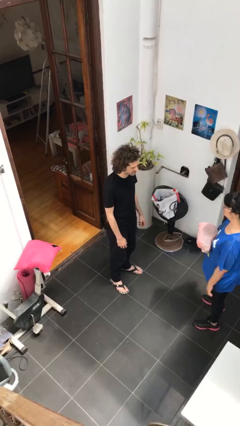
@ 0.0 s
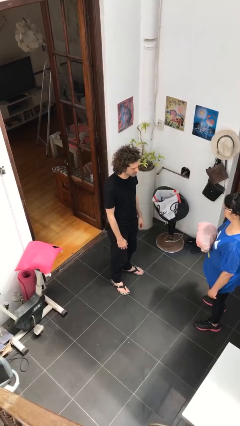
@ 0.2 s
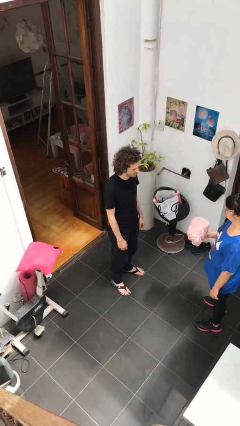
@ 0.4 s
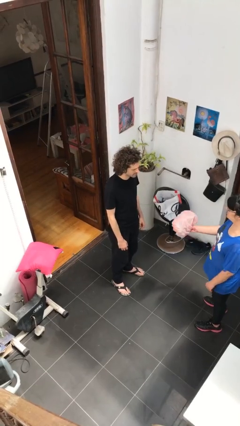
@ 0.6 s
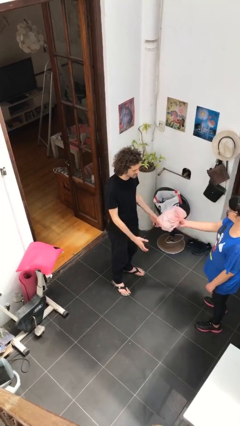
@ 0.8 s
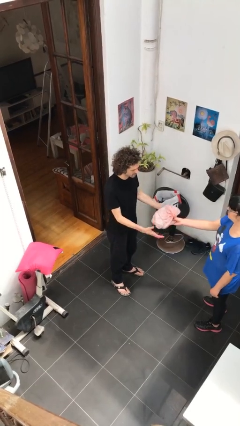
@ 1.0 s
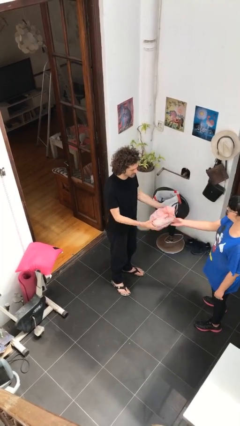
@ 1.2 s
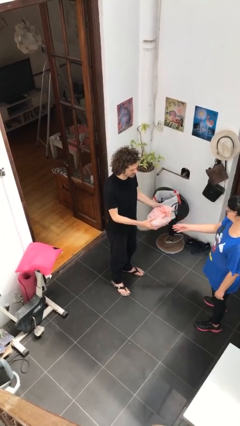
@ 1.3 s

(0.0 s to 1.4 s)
person transfers object to person

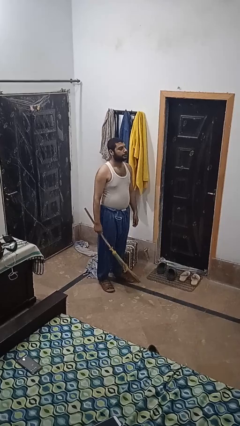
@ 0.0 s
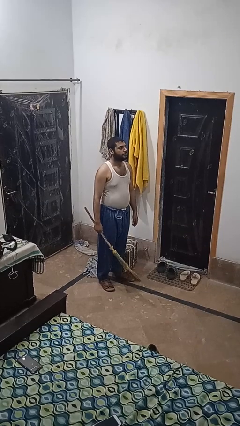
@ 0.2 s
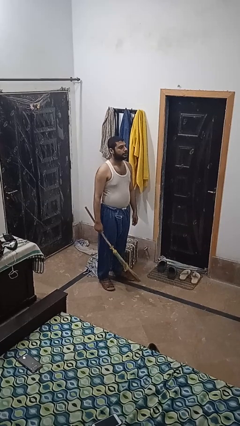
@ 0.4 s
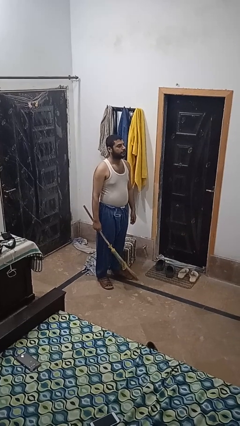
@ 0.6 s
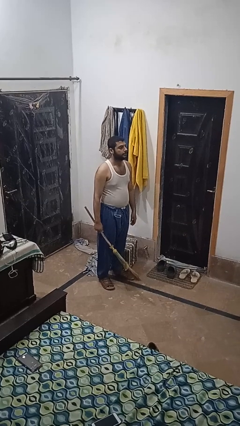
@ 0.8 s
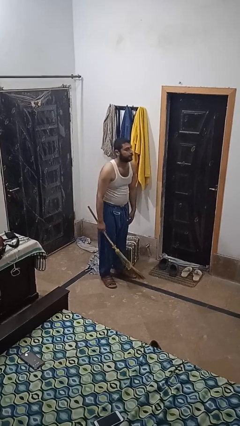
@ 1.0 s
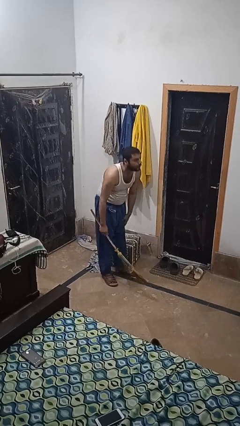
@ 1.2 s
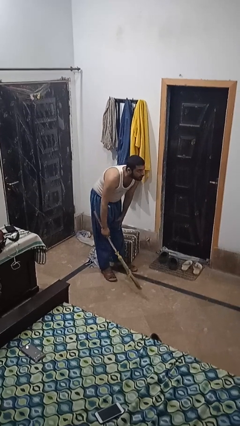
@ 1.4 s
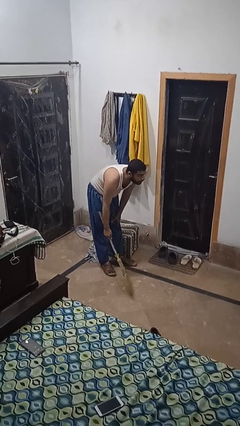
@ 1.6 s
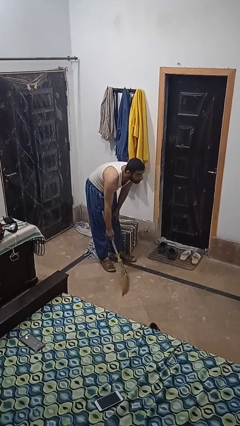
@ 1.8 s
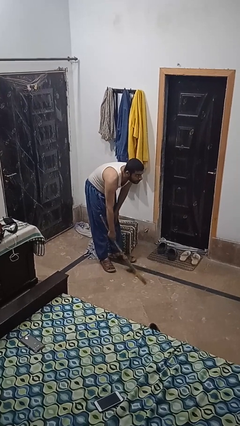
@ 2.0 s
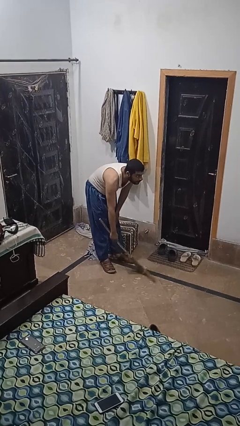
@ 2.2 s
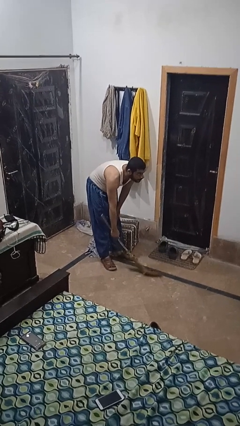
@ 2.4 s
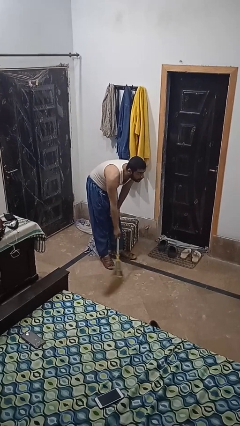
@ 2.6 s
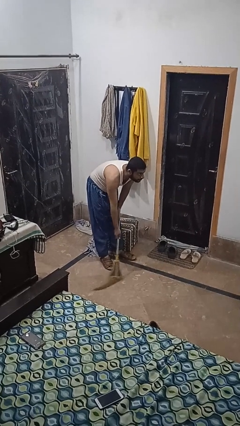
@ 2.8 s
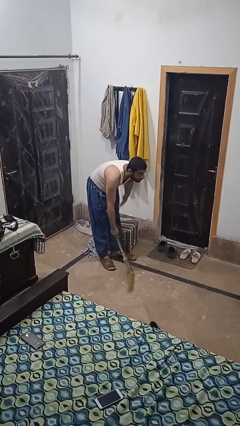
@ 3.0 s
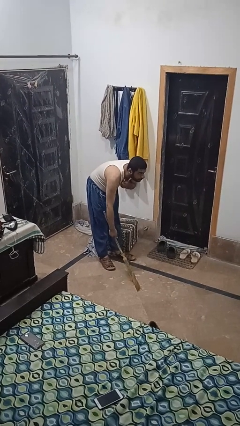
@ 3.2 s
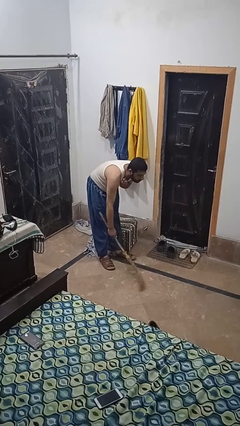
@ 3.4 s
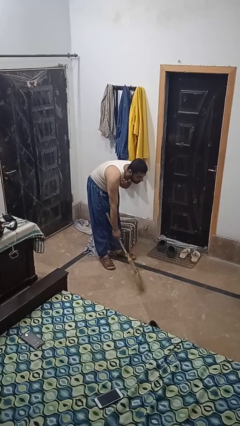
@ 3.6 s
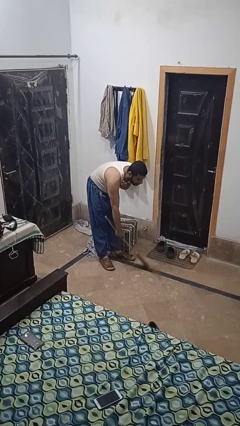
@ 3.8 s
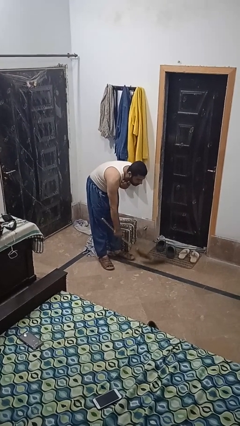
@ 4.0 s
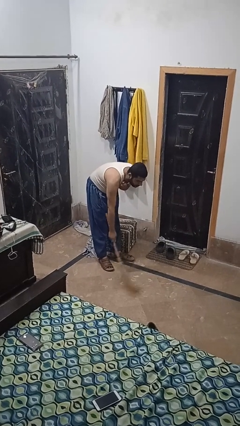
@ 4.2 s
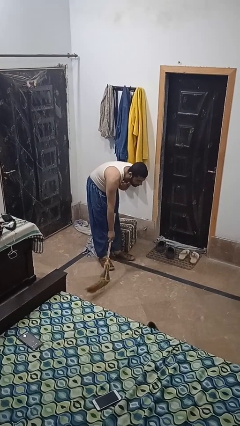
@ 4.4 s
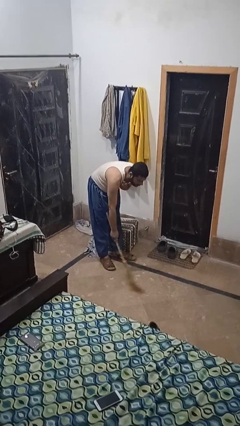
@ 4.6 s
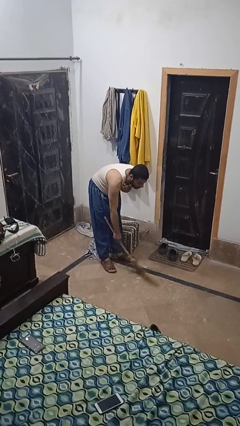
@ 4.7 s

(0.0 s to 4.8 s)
person sweeps floor

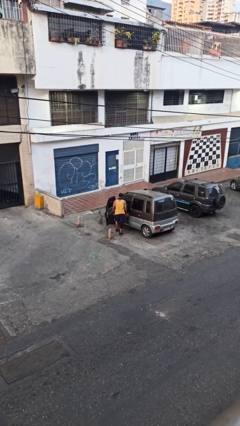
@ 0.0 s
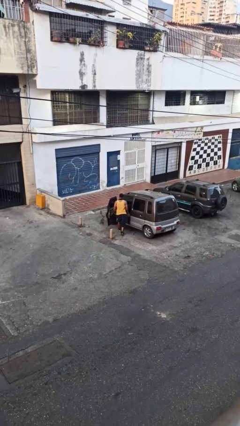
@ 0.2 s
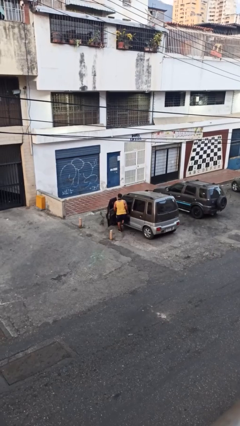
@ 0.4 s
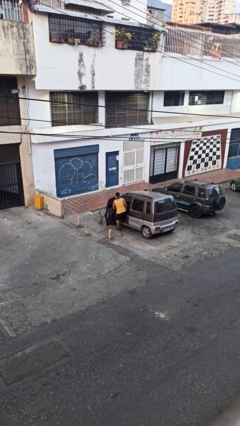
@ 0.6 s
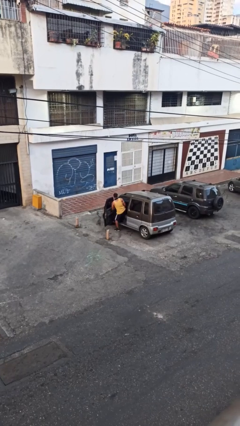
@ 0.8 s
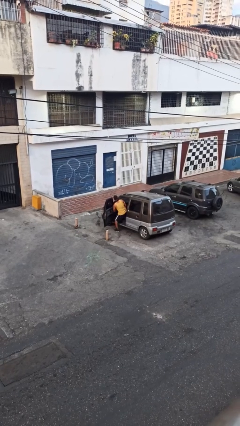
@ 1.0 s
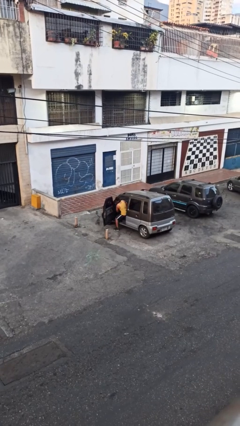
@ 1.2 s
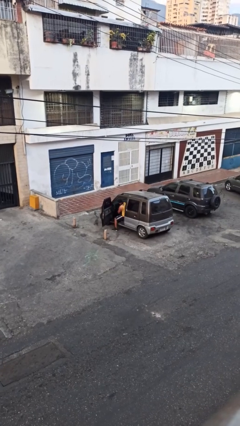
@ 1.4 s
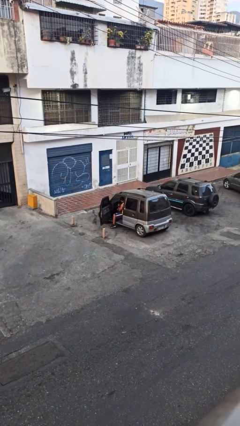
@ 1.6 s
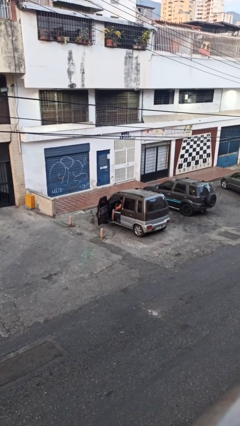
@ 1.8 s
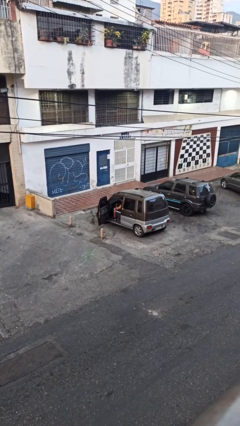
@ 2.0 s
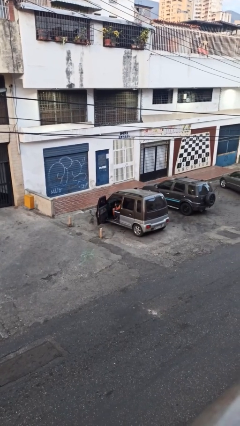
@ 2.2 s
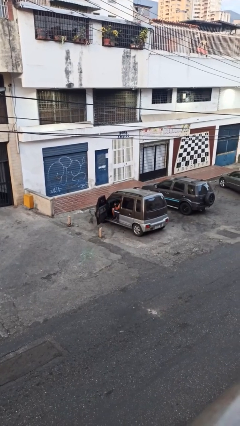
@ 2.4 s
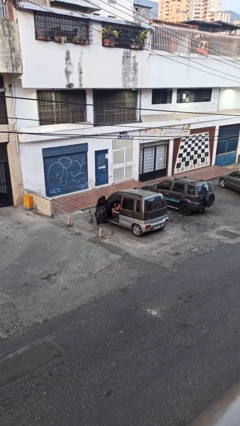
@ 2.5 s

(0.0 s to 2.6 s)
person enters car

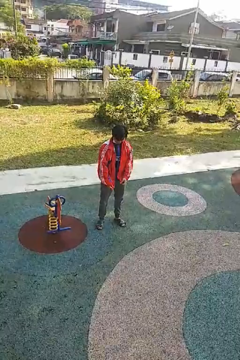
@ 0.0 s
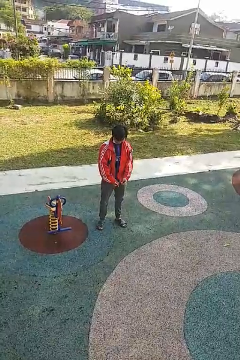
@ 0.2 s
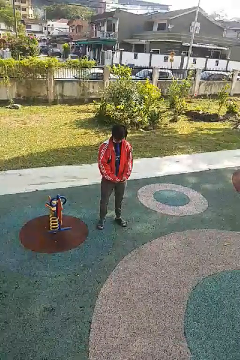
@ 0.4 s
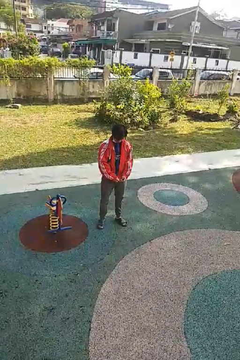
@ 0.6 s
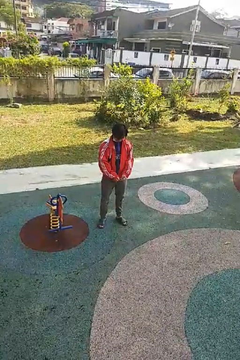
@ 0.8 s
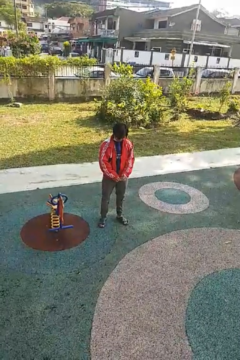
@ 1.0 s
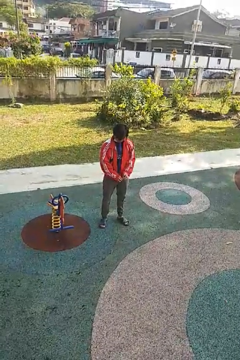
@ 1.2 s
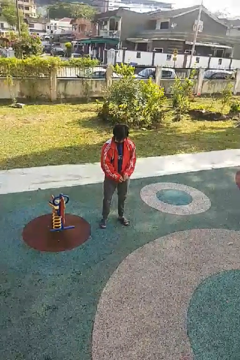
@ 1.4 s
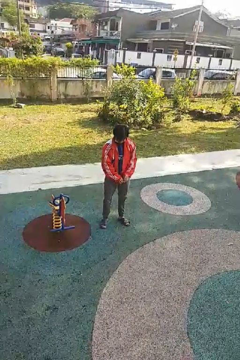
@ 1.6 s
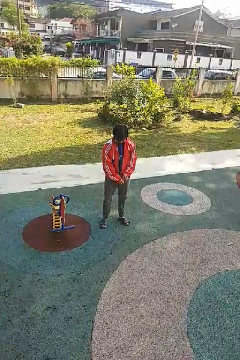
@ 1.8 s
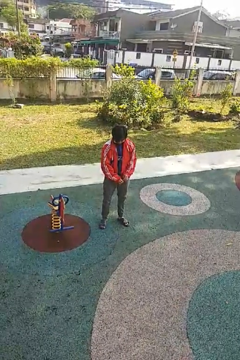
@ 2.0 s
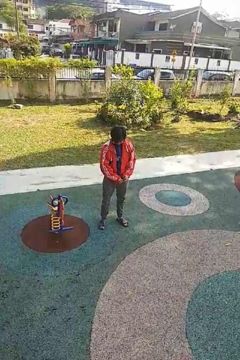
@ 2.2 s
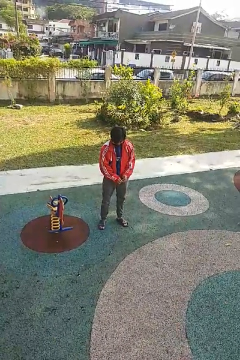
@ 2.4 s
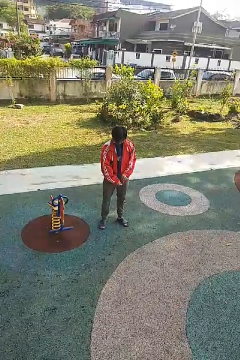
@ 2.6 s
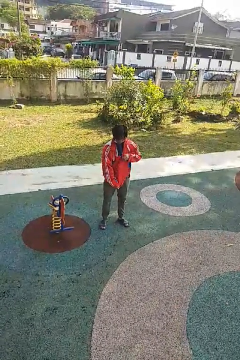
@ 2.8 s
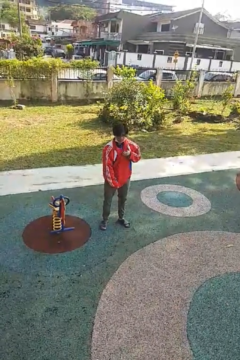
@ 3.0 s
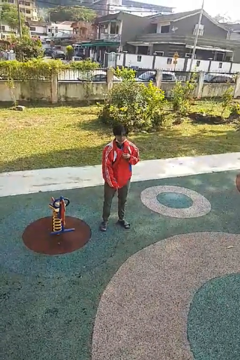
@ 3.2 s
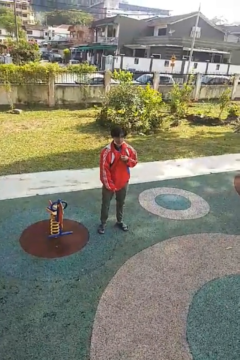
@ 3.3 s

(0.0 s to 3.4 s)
person zips up jacket

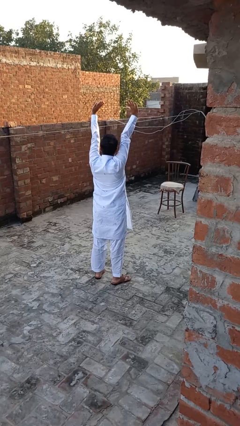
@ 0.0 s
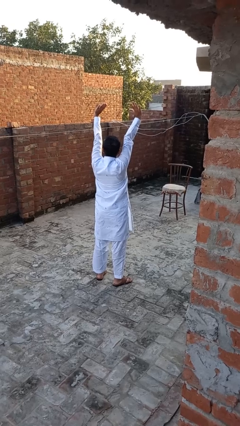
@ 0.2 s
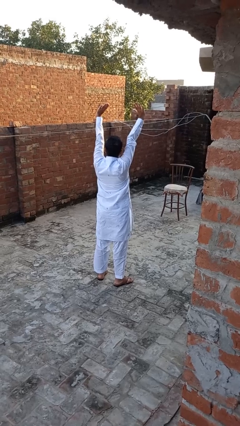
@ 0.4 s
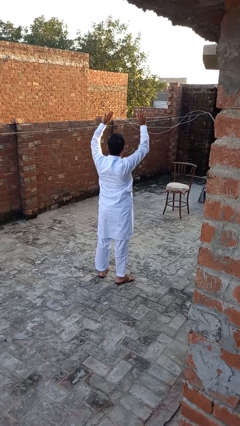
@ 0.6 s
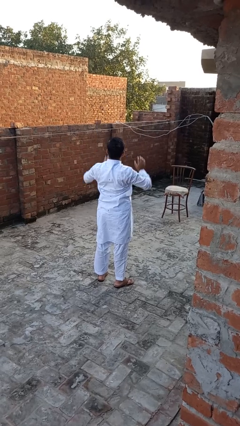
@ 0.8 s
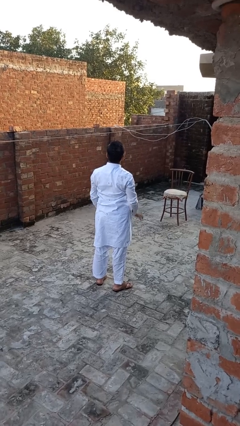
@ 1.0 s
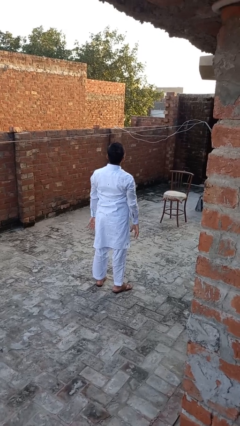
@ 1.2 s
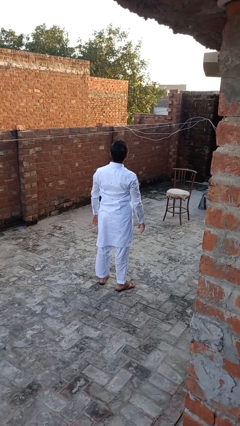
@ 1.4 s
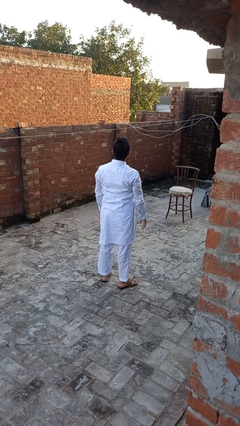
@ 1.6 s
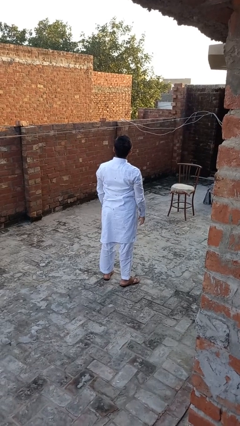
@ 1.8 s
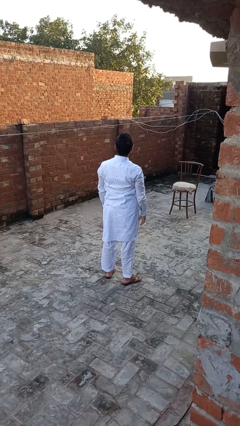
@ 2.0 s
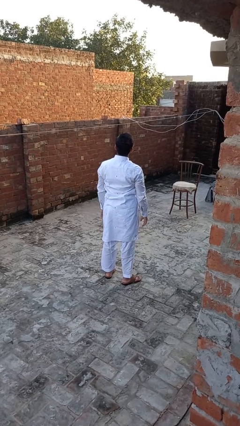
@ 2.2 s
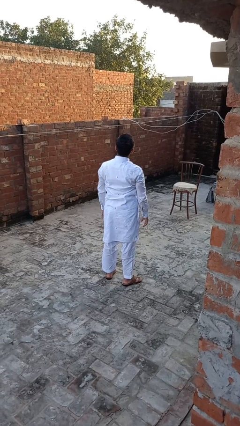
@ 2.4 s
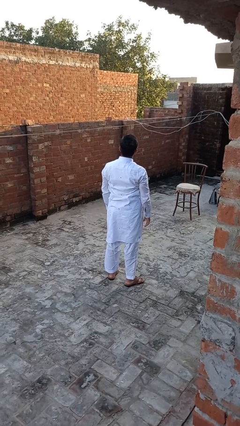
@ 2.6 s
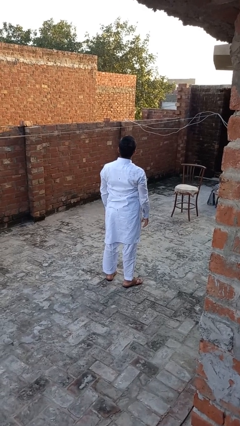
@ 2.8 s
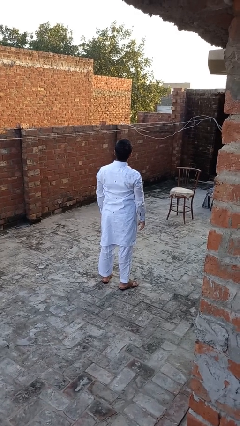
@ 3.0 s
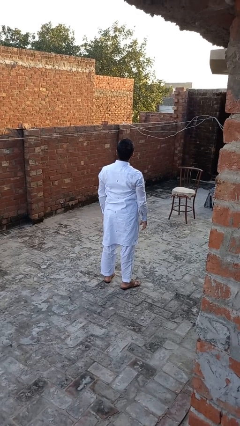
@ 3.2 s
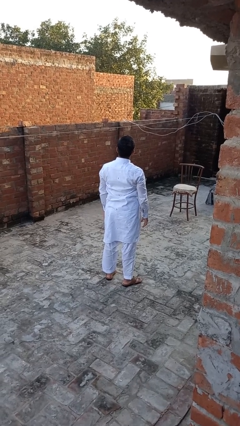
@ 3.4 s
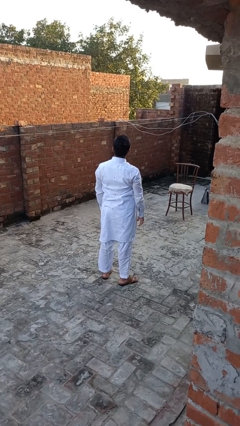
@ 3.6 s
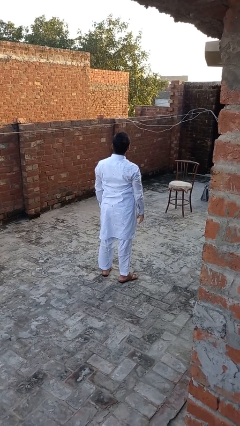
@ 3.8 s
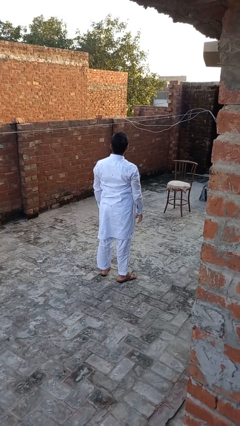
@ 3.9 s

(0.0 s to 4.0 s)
person gestures swipe down

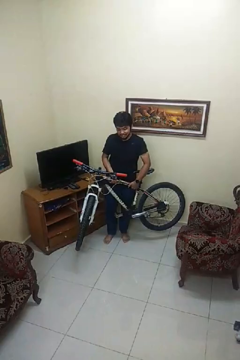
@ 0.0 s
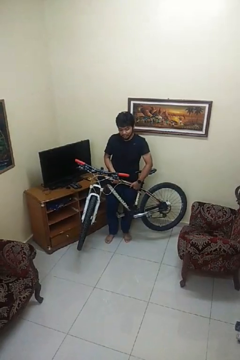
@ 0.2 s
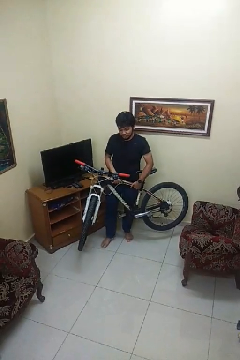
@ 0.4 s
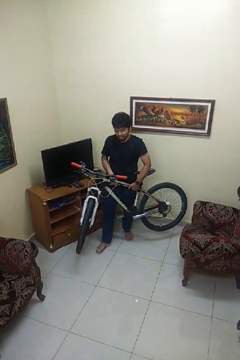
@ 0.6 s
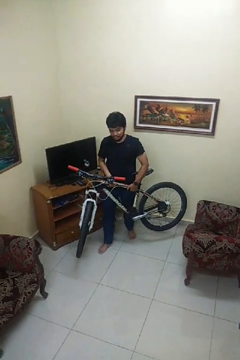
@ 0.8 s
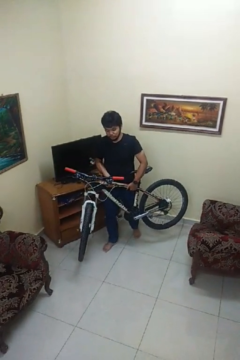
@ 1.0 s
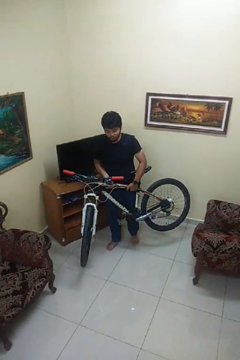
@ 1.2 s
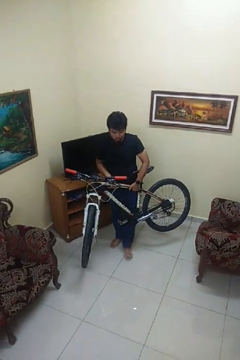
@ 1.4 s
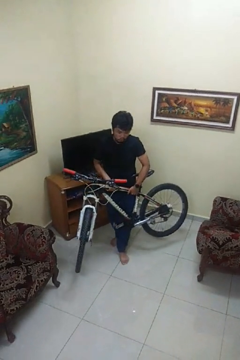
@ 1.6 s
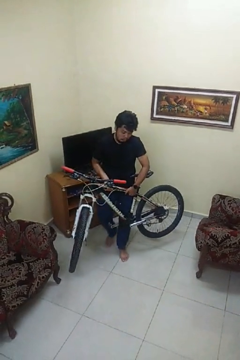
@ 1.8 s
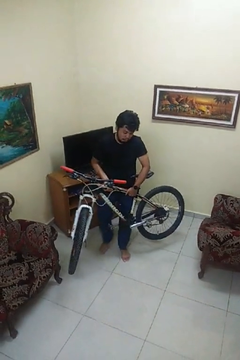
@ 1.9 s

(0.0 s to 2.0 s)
person carries bicycle

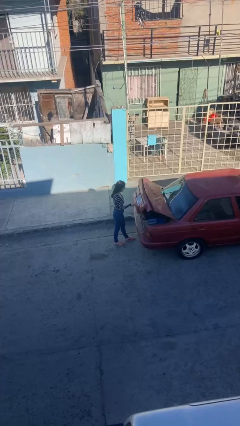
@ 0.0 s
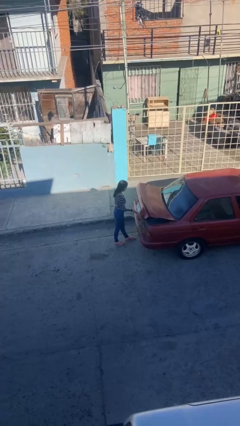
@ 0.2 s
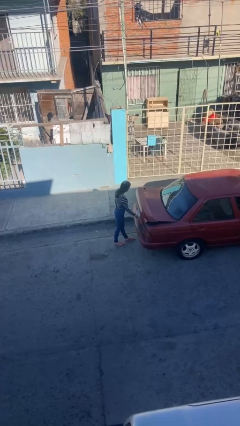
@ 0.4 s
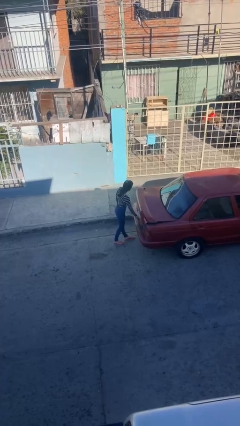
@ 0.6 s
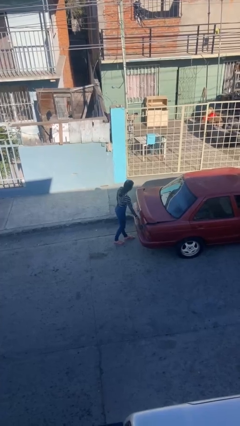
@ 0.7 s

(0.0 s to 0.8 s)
person closes car trunk
